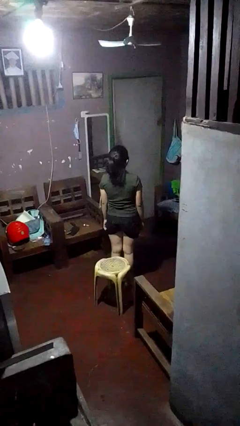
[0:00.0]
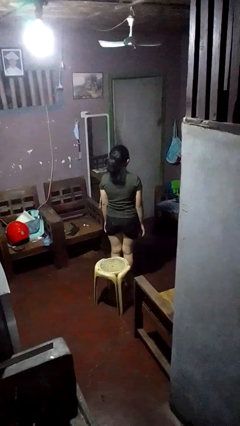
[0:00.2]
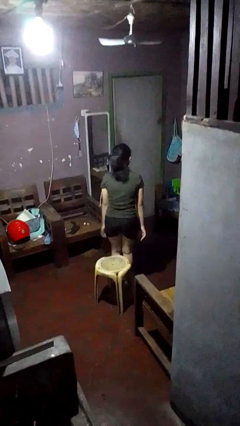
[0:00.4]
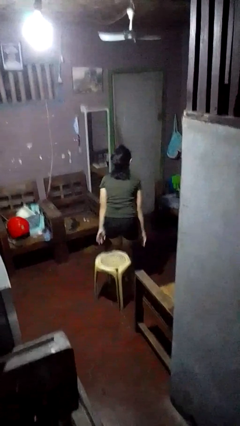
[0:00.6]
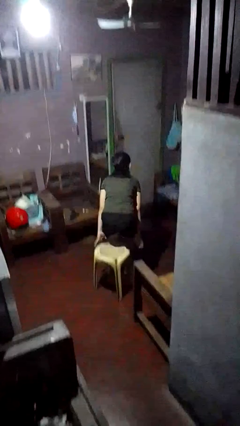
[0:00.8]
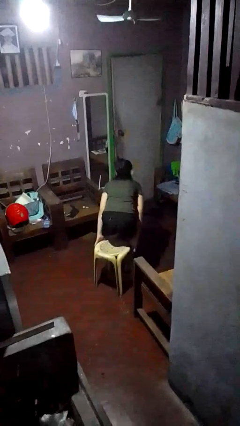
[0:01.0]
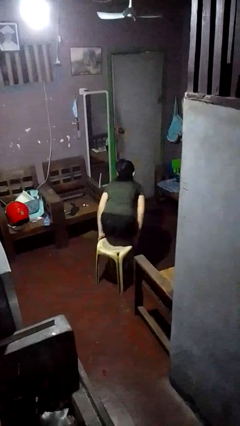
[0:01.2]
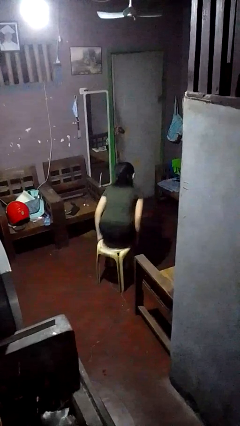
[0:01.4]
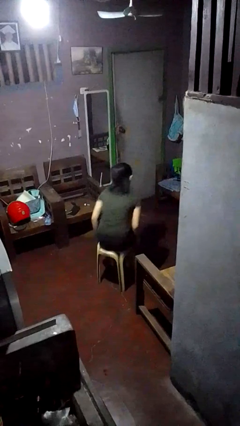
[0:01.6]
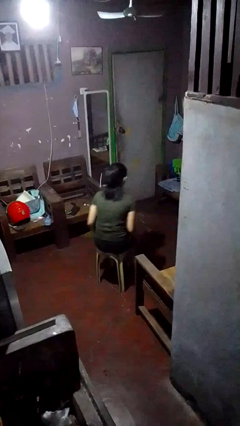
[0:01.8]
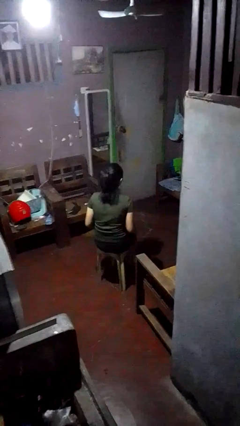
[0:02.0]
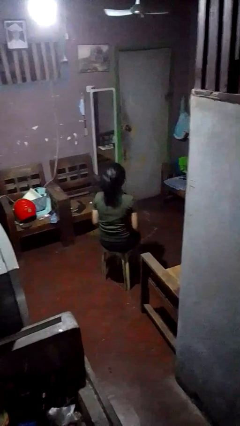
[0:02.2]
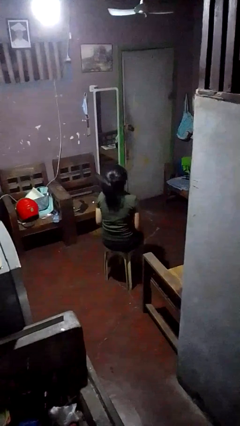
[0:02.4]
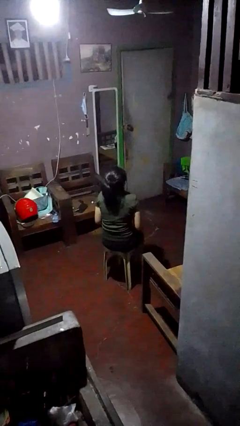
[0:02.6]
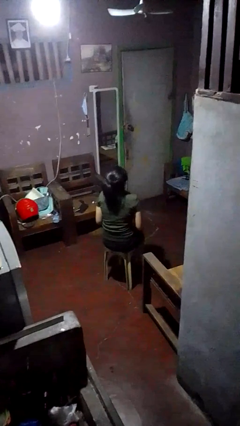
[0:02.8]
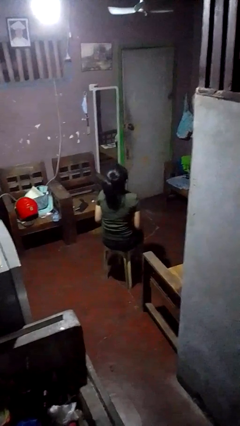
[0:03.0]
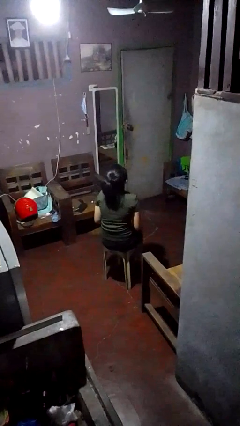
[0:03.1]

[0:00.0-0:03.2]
person sits down

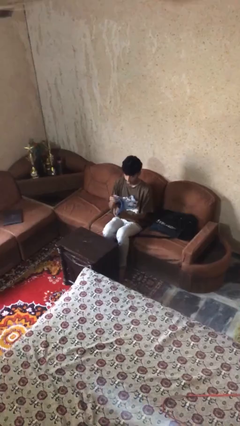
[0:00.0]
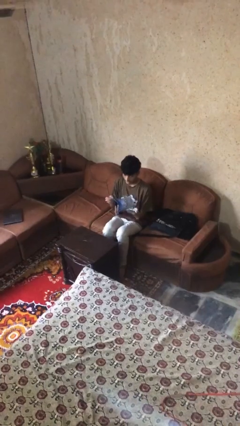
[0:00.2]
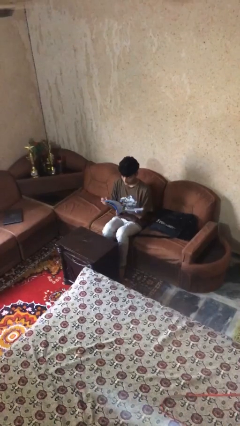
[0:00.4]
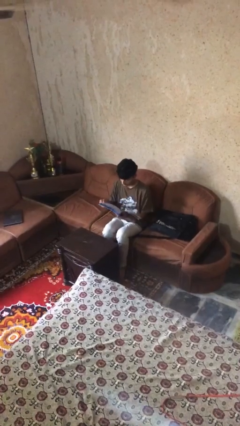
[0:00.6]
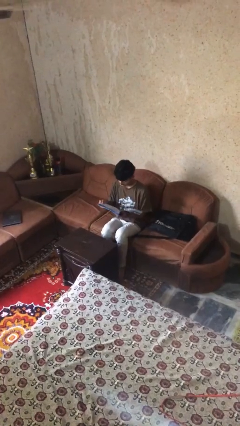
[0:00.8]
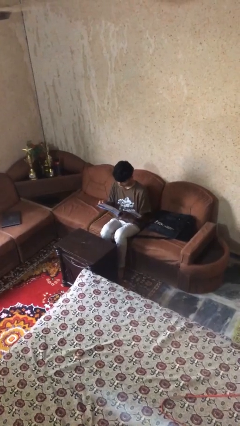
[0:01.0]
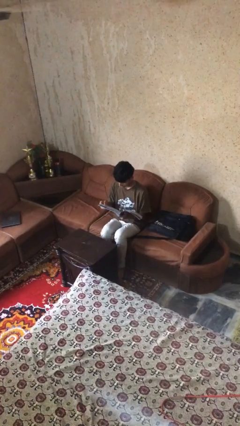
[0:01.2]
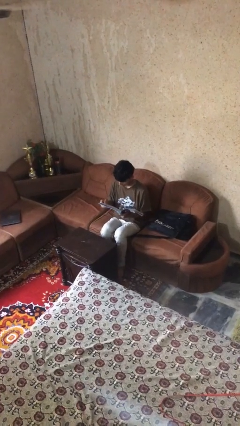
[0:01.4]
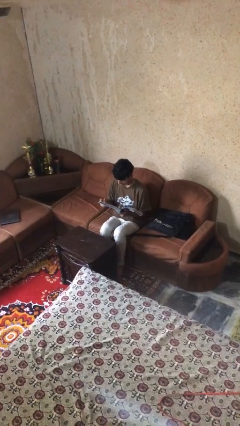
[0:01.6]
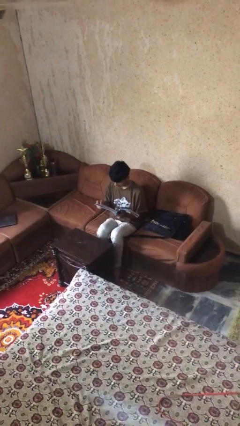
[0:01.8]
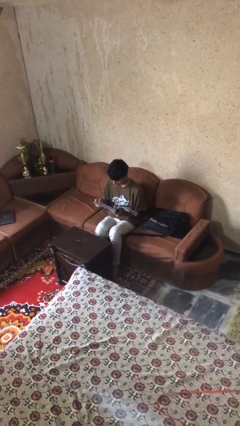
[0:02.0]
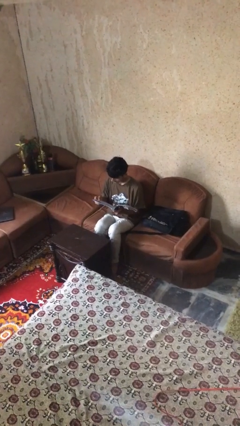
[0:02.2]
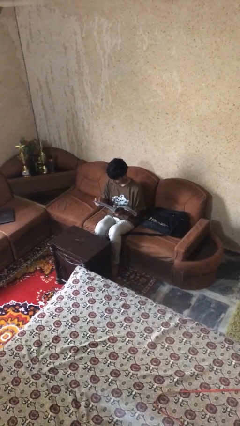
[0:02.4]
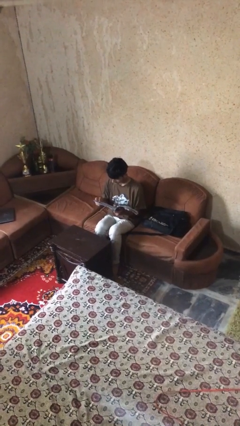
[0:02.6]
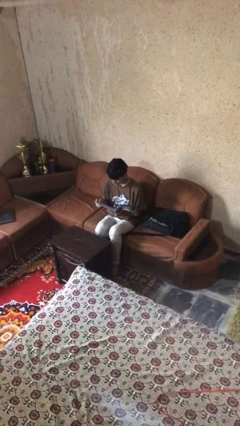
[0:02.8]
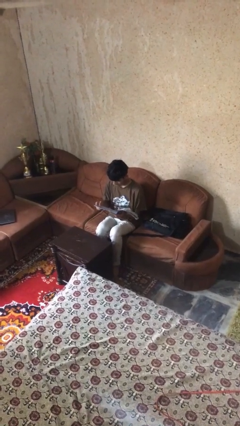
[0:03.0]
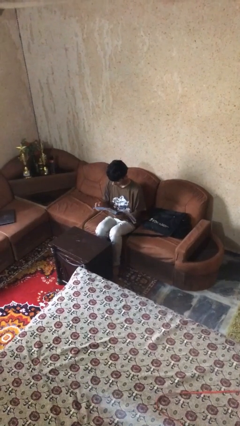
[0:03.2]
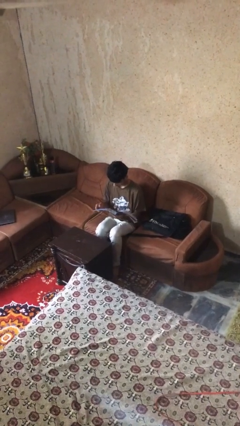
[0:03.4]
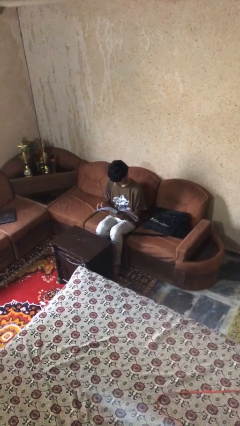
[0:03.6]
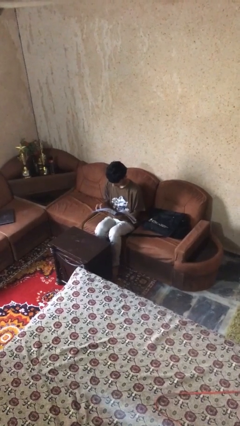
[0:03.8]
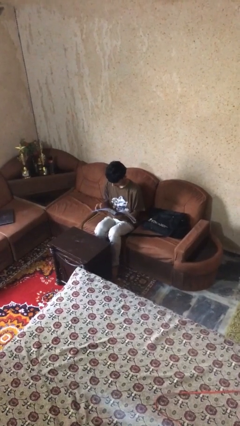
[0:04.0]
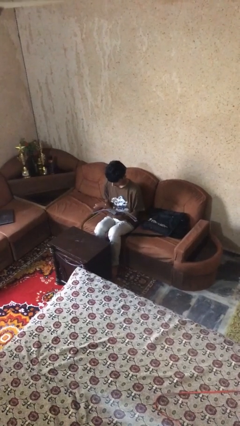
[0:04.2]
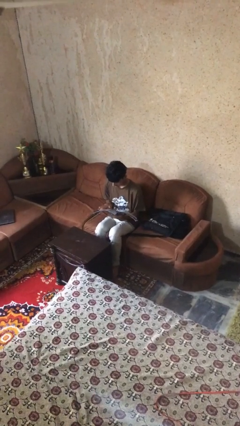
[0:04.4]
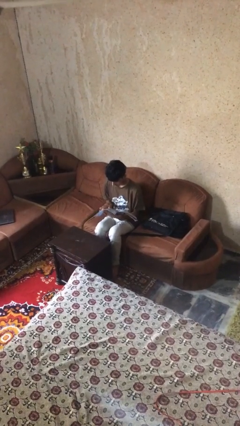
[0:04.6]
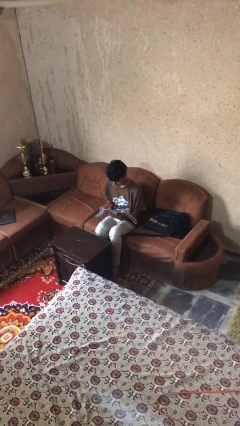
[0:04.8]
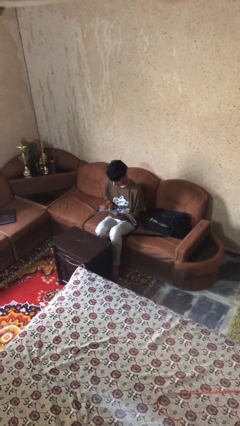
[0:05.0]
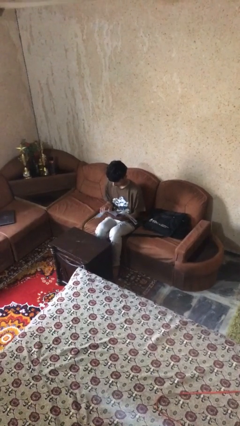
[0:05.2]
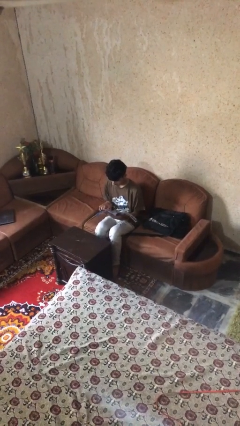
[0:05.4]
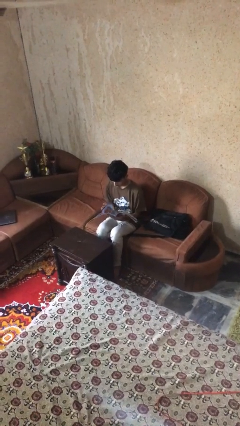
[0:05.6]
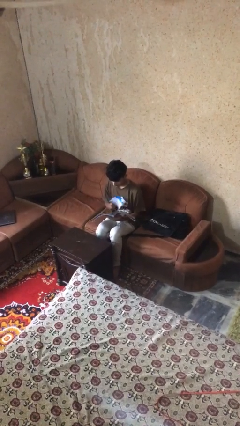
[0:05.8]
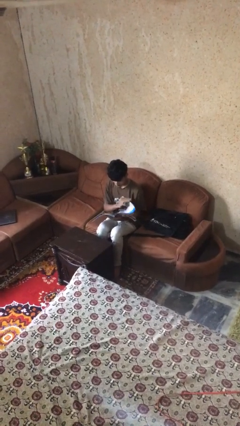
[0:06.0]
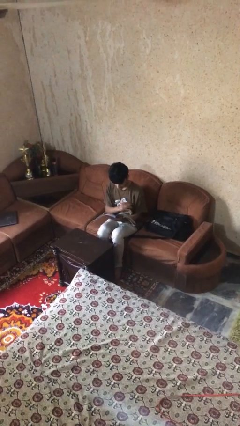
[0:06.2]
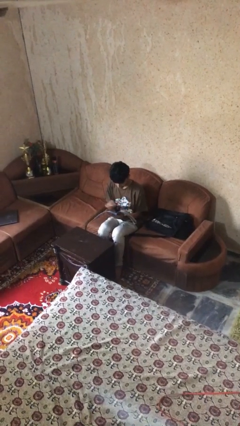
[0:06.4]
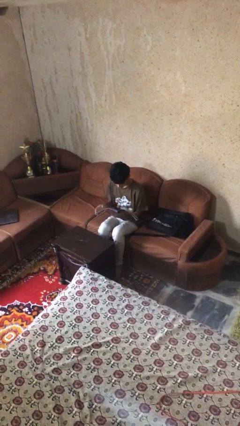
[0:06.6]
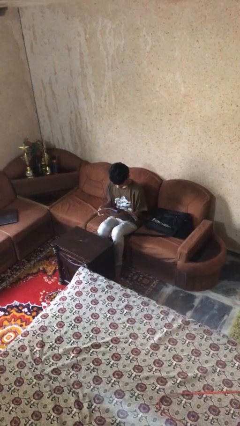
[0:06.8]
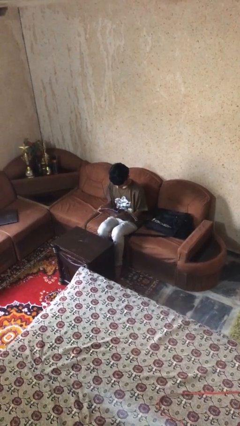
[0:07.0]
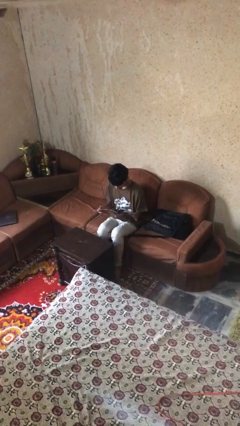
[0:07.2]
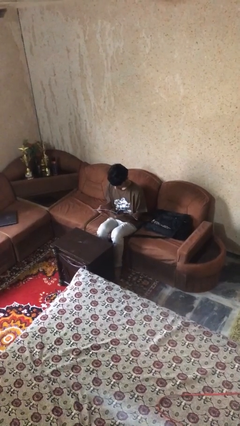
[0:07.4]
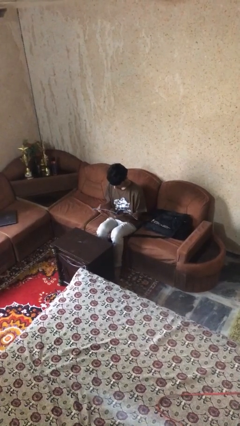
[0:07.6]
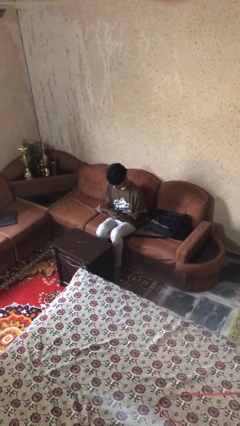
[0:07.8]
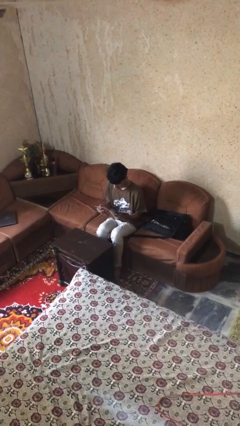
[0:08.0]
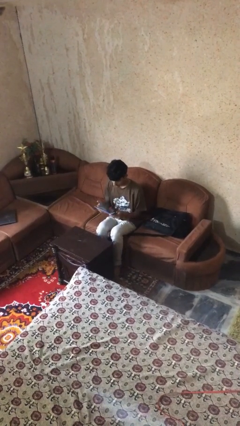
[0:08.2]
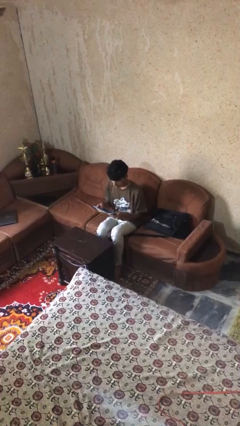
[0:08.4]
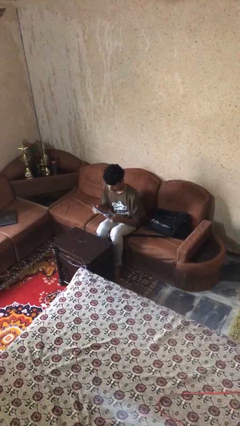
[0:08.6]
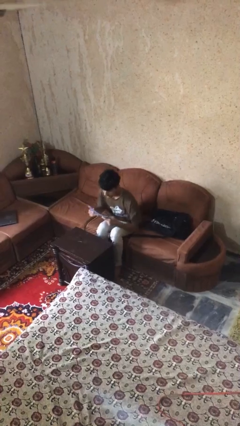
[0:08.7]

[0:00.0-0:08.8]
person reads document

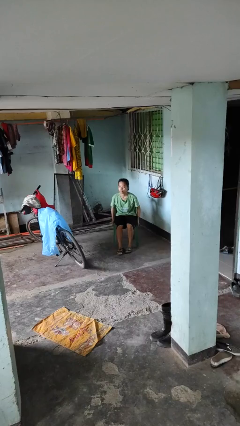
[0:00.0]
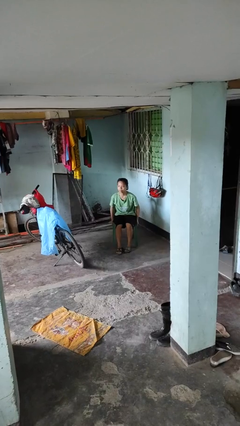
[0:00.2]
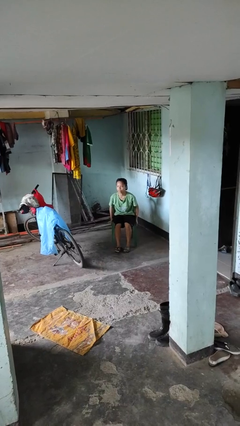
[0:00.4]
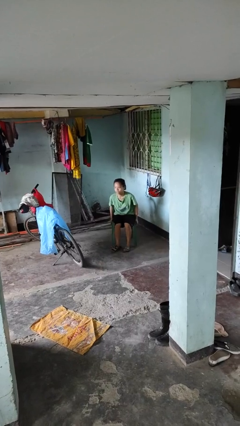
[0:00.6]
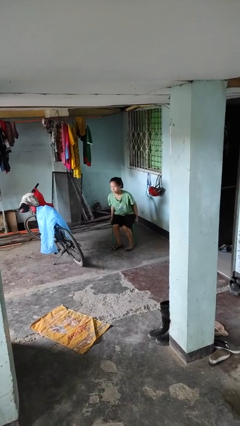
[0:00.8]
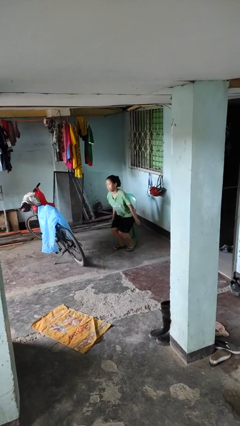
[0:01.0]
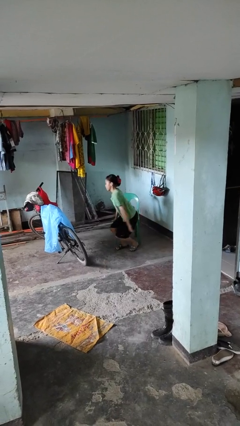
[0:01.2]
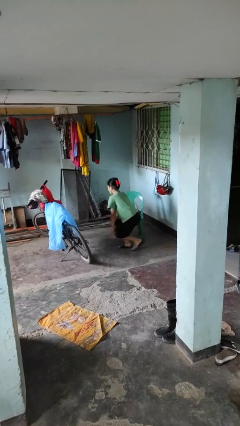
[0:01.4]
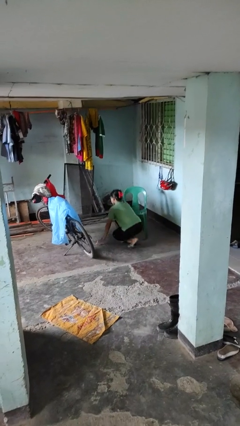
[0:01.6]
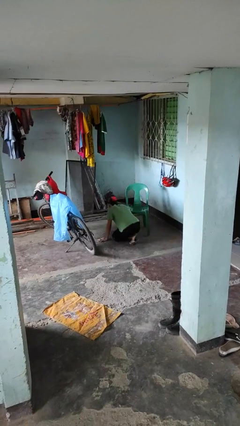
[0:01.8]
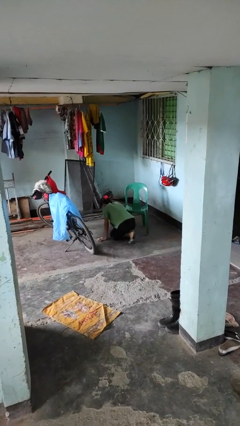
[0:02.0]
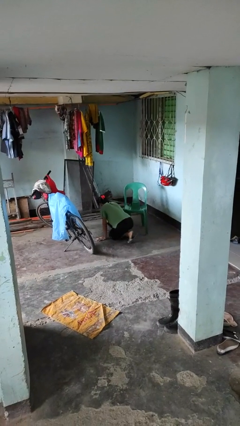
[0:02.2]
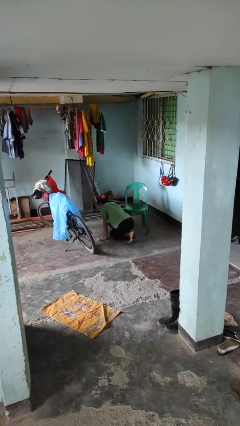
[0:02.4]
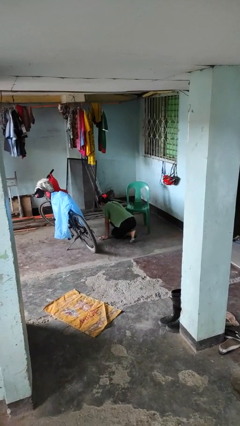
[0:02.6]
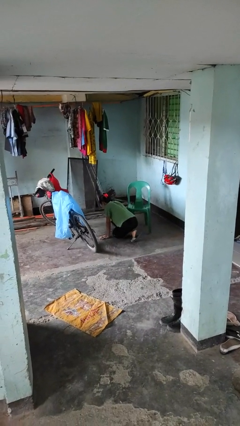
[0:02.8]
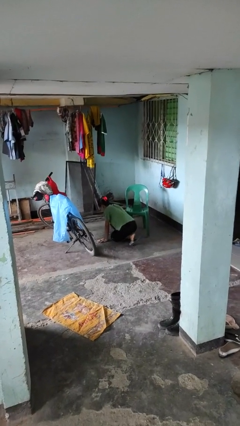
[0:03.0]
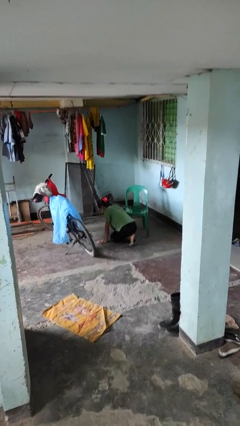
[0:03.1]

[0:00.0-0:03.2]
person falls from chair

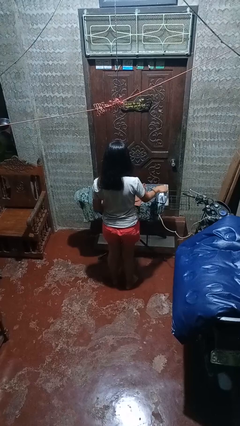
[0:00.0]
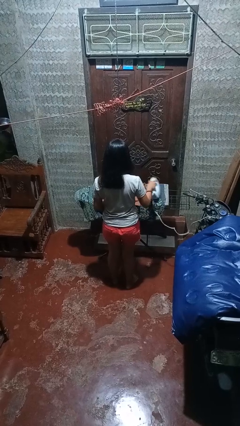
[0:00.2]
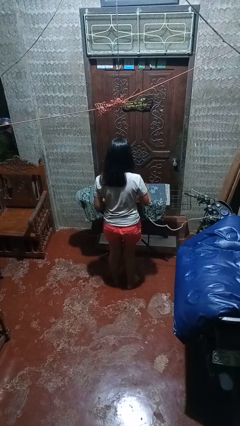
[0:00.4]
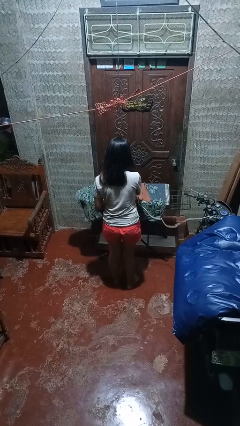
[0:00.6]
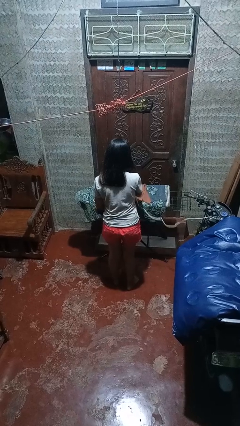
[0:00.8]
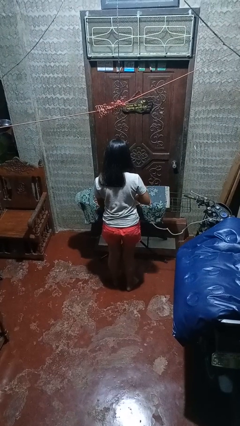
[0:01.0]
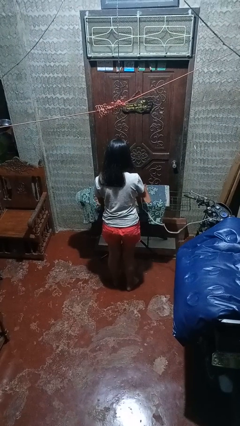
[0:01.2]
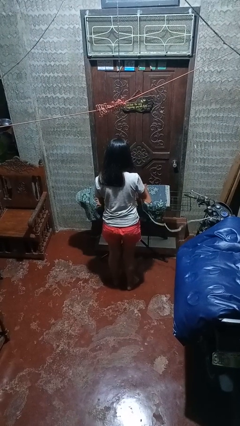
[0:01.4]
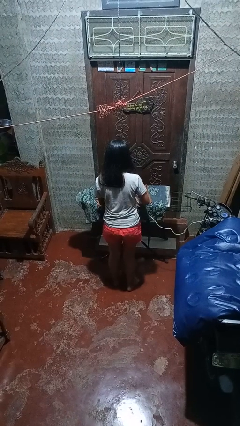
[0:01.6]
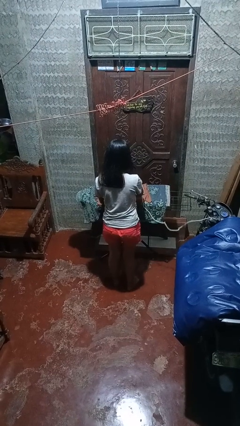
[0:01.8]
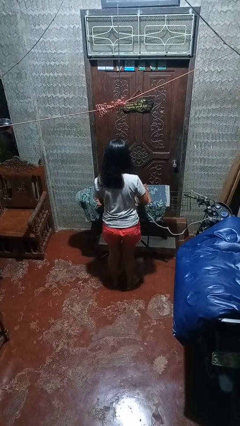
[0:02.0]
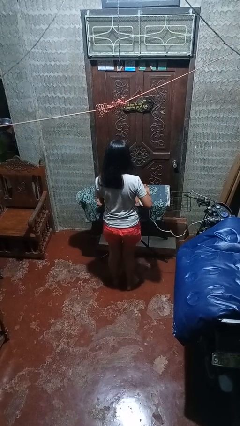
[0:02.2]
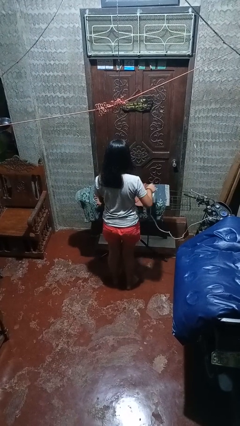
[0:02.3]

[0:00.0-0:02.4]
person irons clothes

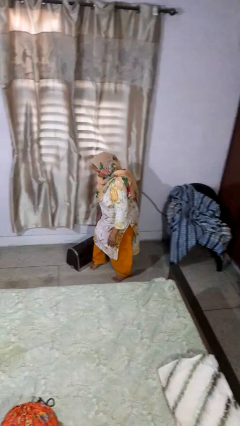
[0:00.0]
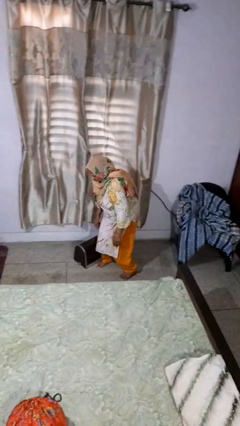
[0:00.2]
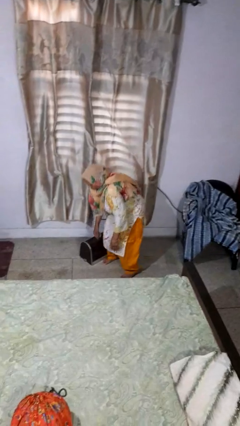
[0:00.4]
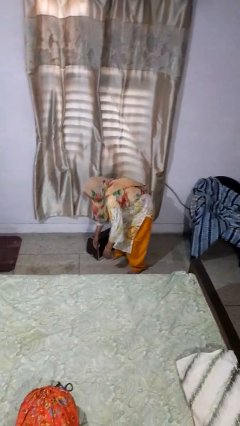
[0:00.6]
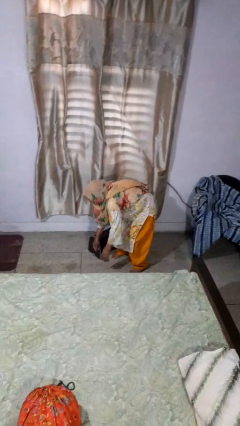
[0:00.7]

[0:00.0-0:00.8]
person trips on object on floor
